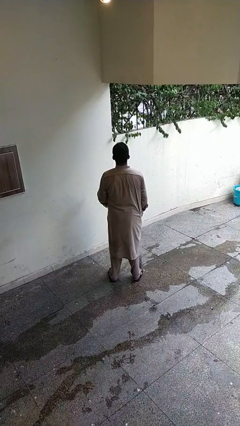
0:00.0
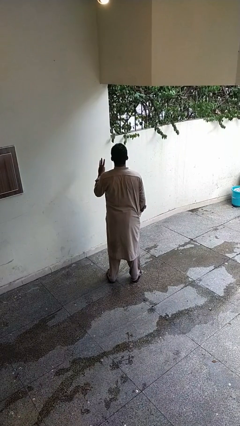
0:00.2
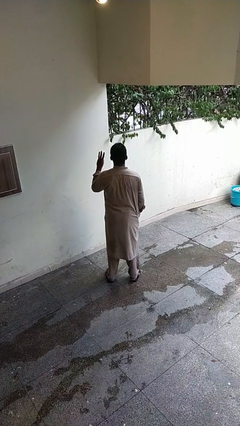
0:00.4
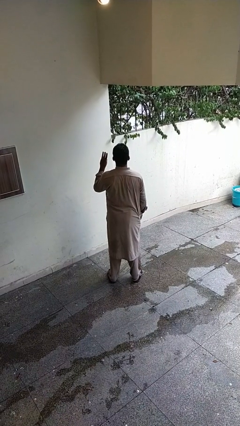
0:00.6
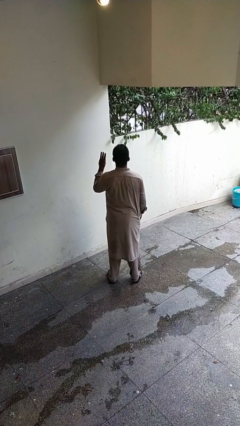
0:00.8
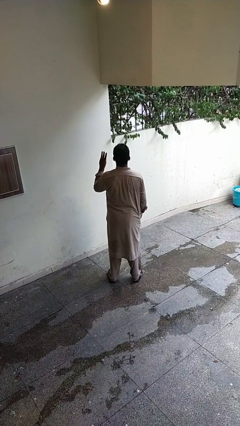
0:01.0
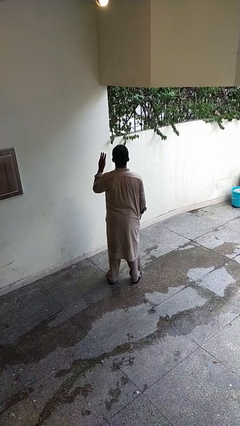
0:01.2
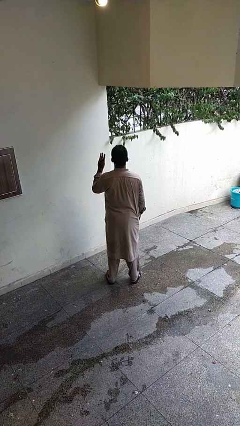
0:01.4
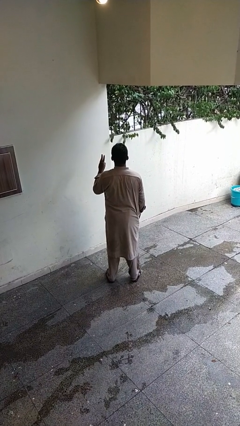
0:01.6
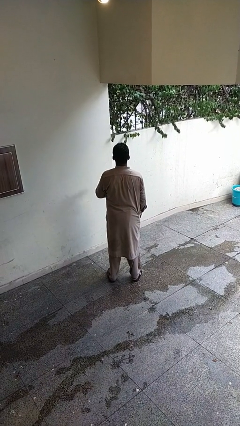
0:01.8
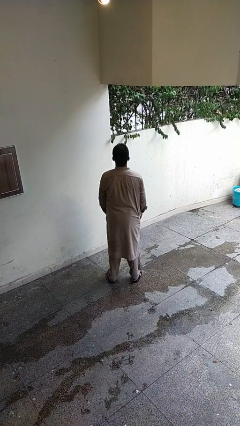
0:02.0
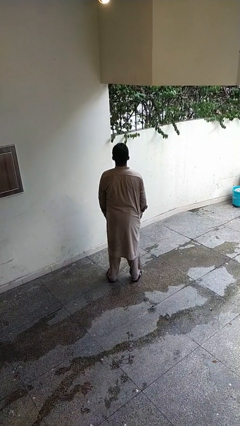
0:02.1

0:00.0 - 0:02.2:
person gestures number three

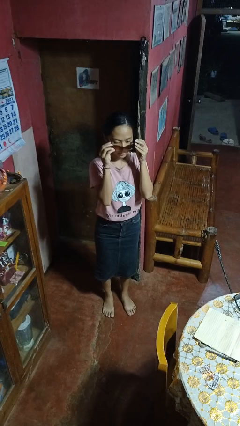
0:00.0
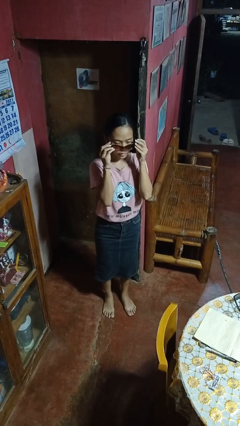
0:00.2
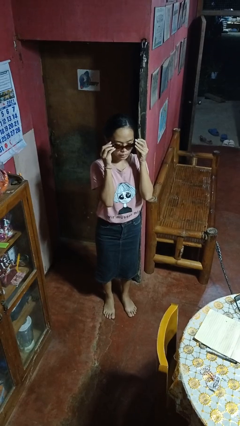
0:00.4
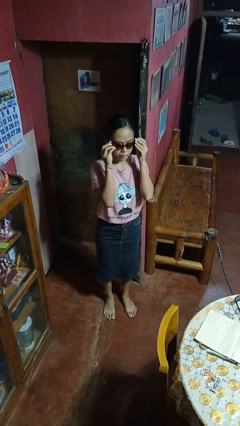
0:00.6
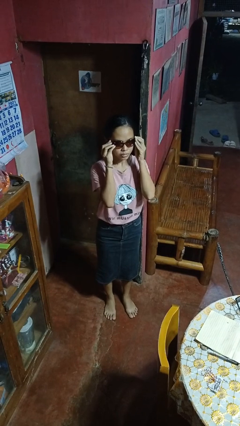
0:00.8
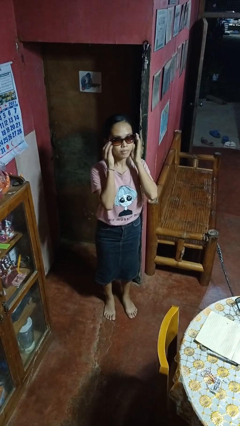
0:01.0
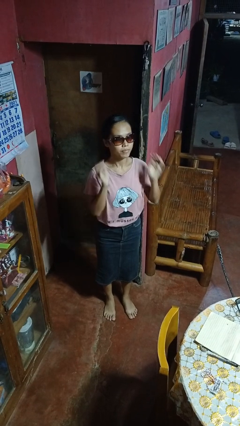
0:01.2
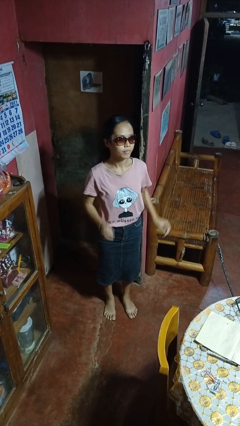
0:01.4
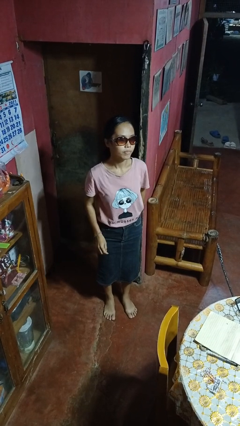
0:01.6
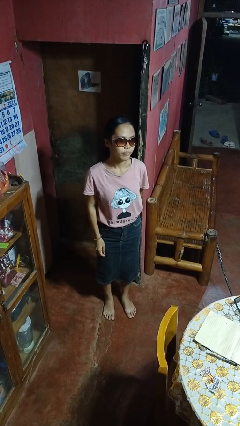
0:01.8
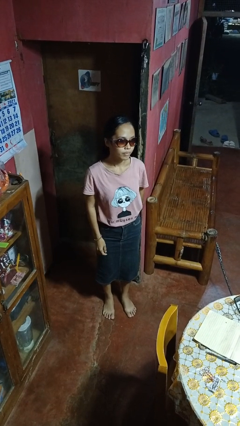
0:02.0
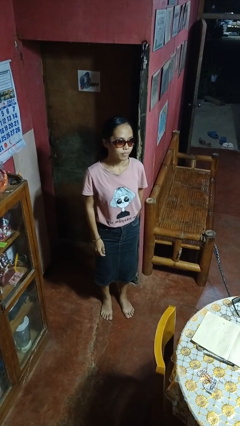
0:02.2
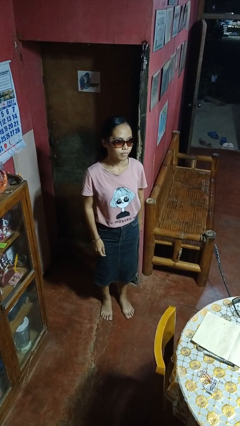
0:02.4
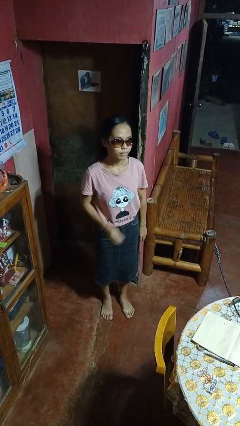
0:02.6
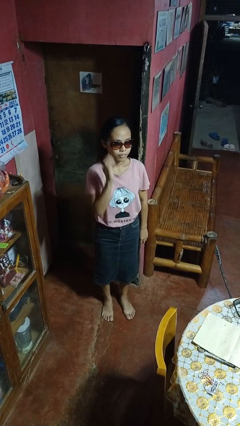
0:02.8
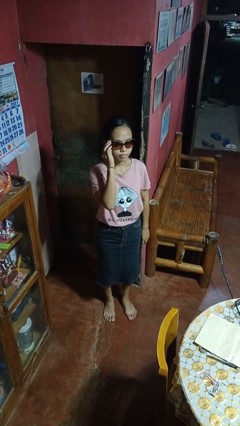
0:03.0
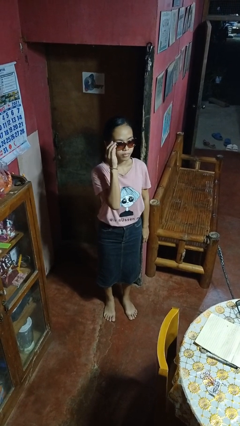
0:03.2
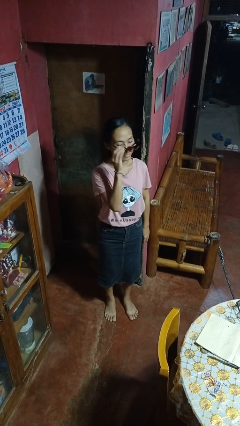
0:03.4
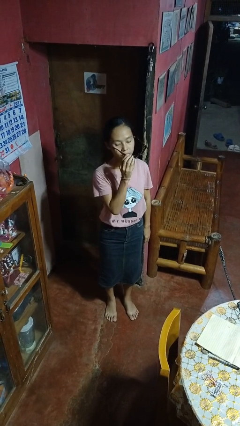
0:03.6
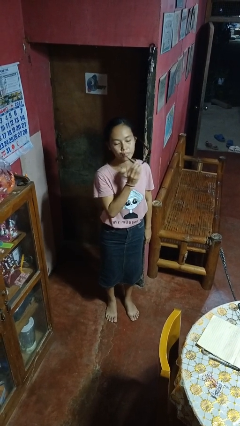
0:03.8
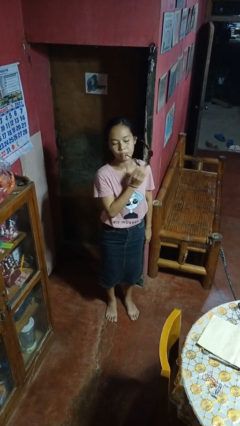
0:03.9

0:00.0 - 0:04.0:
person puts on sunglasses

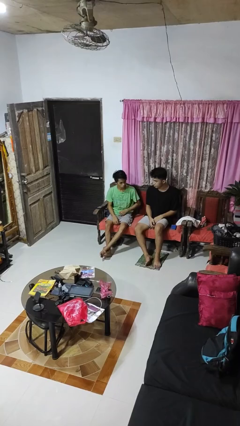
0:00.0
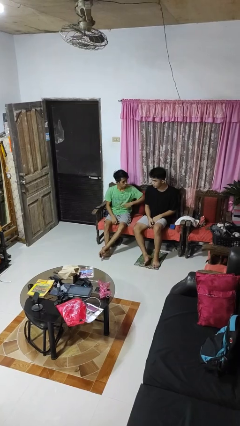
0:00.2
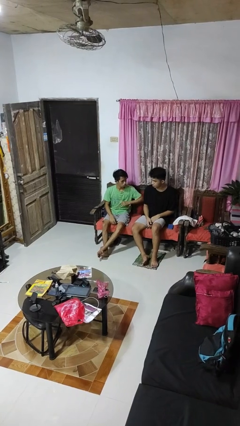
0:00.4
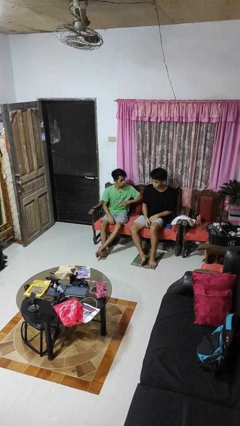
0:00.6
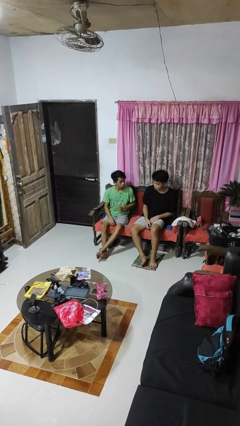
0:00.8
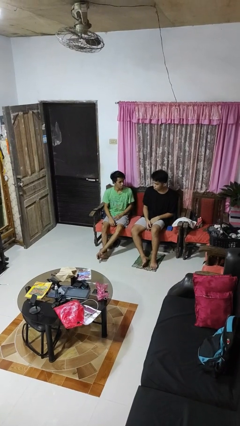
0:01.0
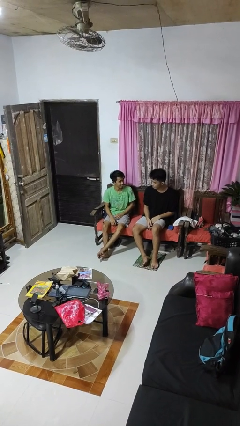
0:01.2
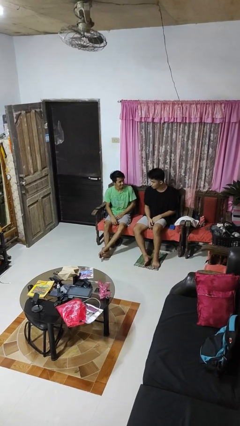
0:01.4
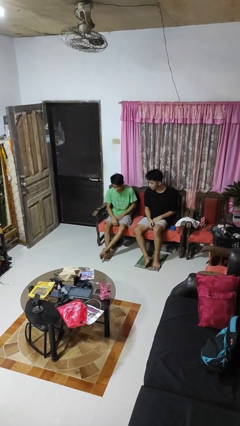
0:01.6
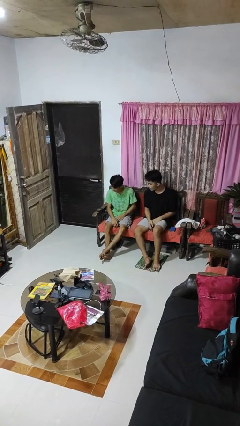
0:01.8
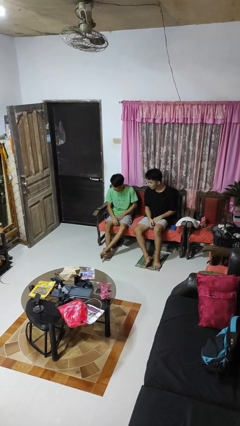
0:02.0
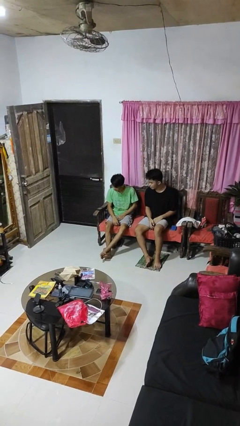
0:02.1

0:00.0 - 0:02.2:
person nudges person with elbow

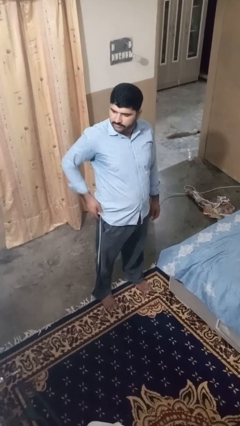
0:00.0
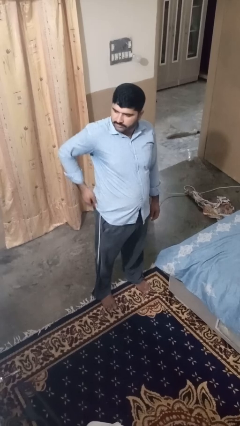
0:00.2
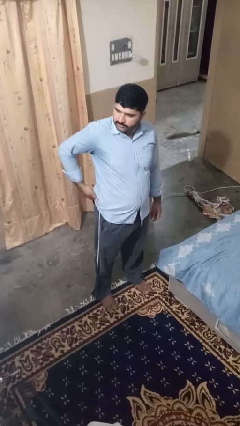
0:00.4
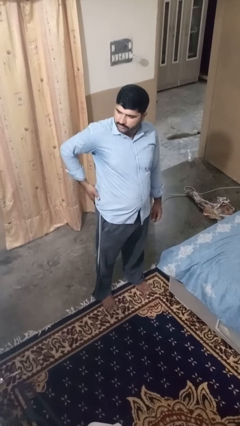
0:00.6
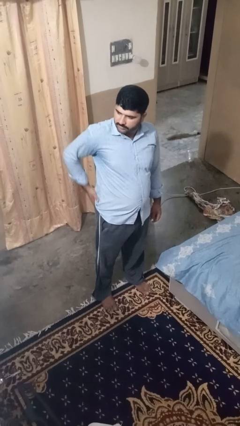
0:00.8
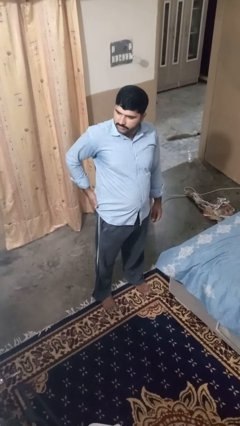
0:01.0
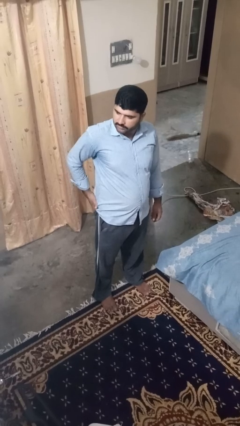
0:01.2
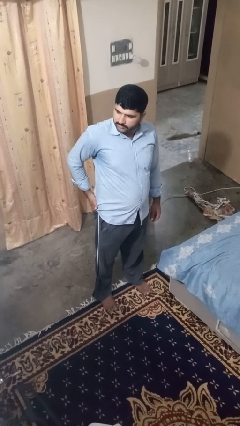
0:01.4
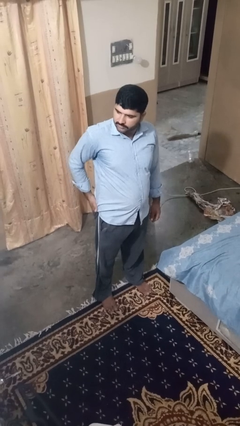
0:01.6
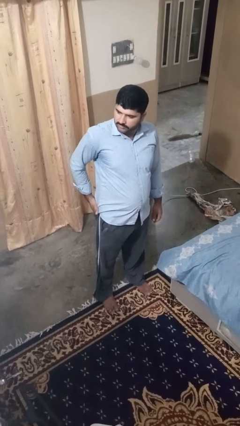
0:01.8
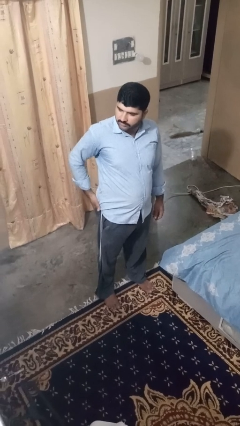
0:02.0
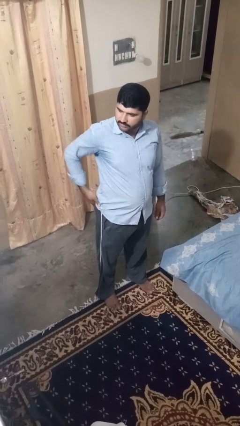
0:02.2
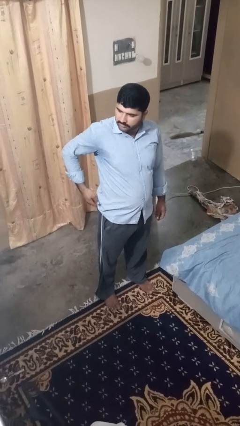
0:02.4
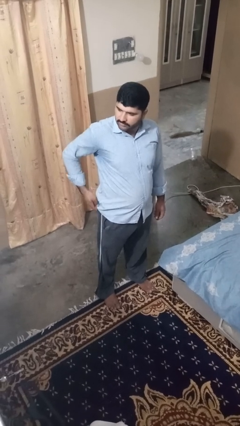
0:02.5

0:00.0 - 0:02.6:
person puts hands in back pockets

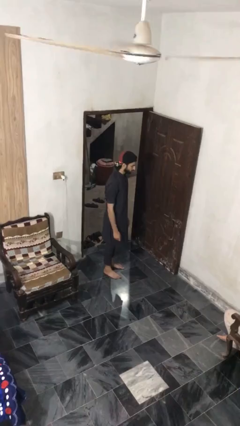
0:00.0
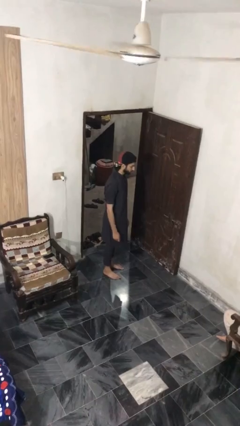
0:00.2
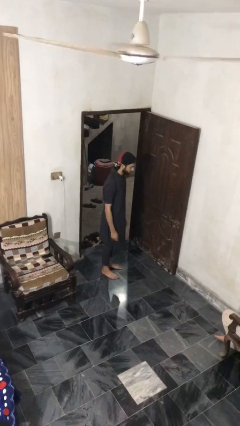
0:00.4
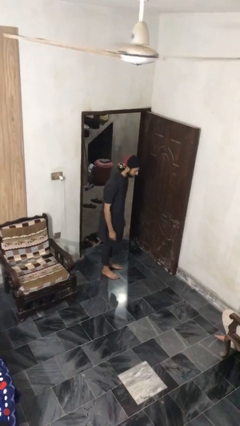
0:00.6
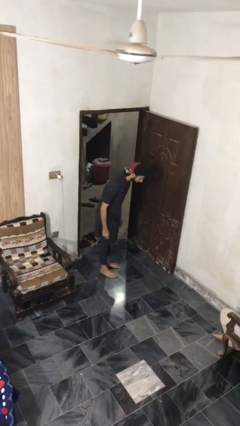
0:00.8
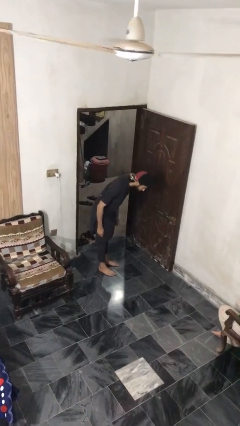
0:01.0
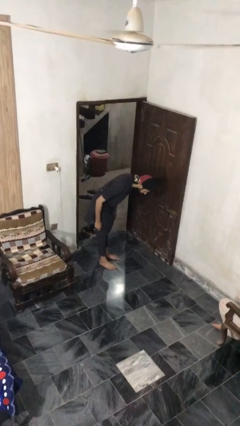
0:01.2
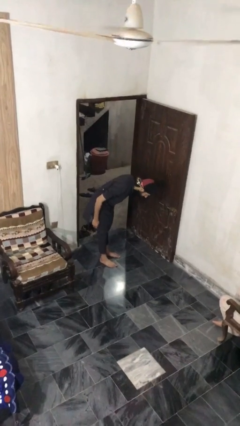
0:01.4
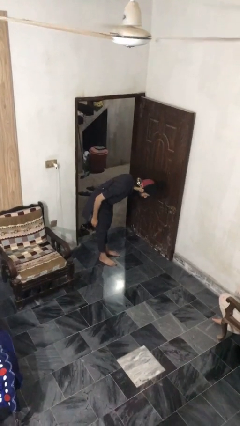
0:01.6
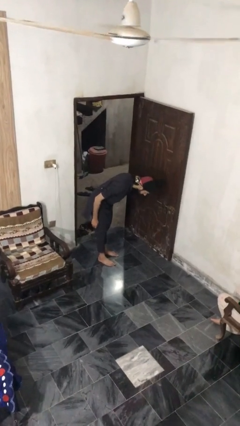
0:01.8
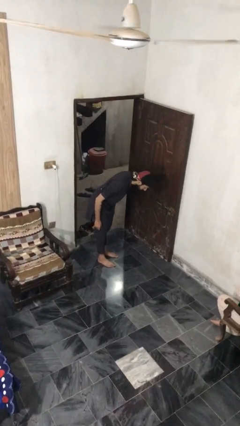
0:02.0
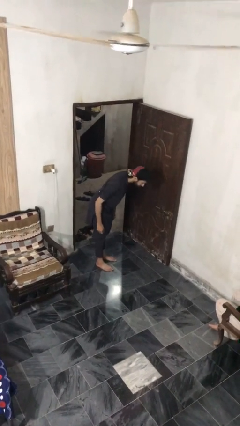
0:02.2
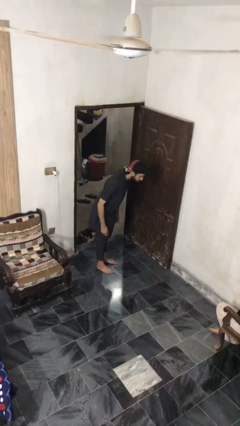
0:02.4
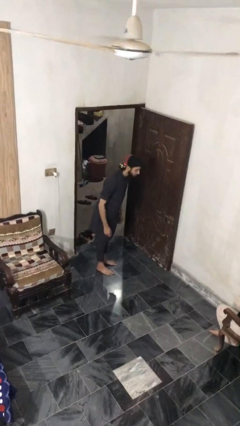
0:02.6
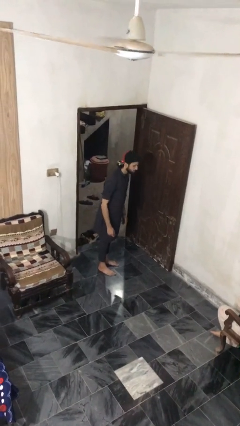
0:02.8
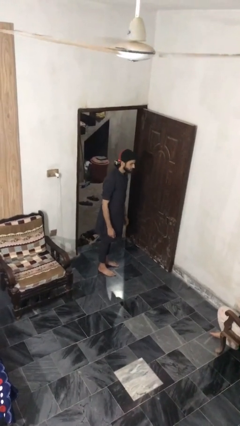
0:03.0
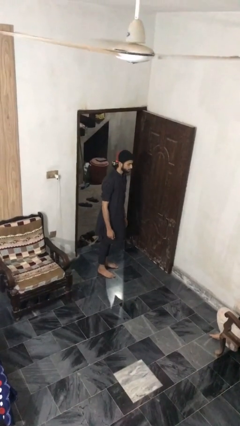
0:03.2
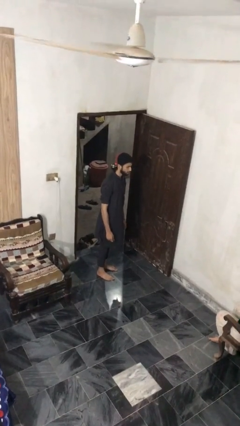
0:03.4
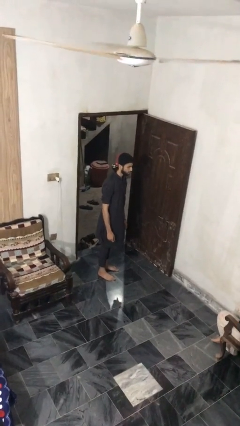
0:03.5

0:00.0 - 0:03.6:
person bows

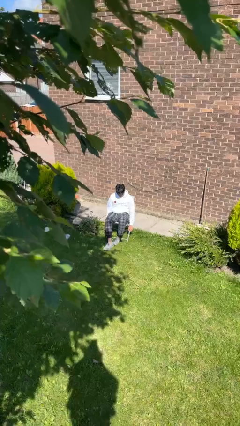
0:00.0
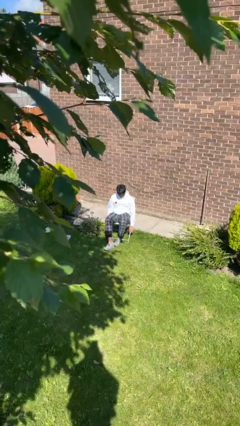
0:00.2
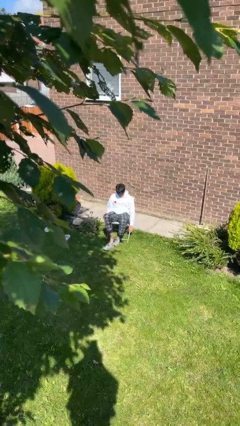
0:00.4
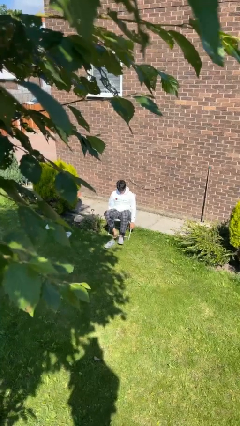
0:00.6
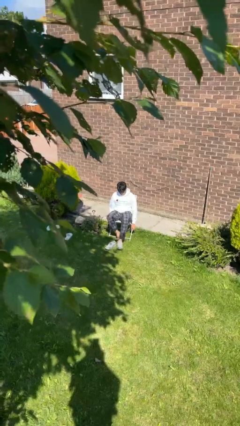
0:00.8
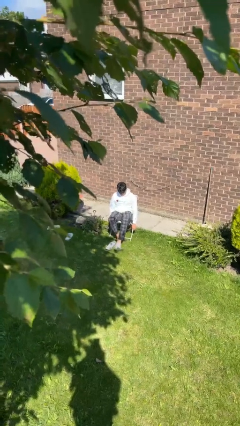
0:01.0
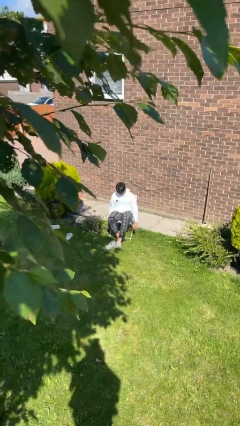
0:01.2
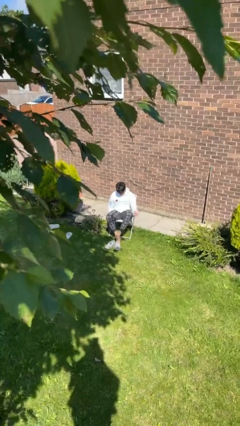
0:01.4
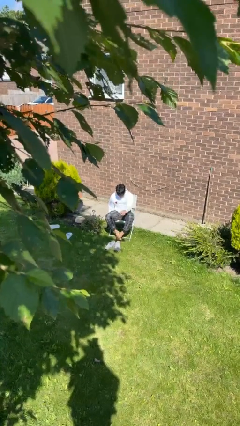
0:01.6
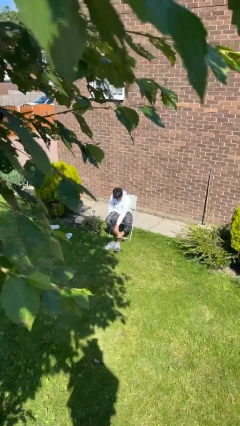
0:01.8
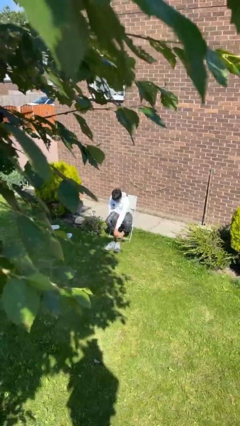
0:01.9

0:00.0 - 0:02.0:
person takes off shoes

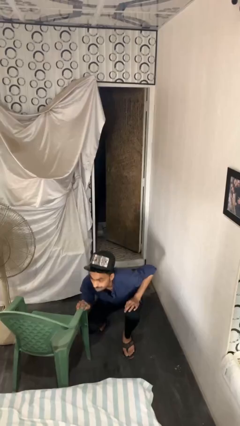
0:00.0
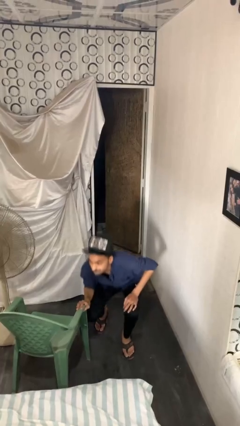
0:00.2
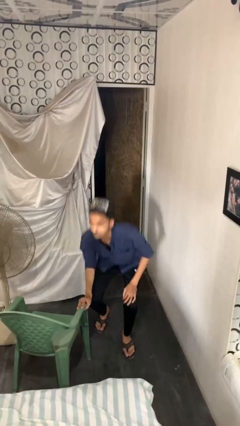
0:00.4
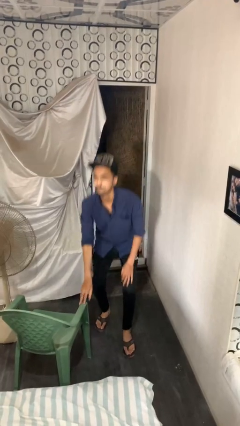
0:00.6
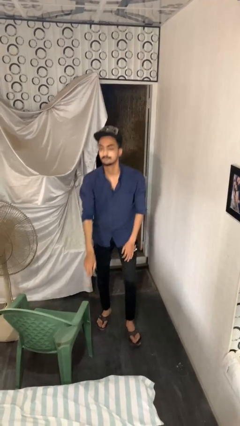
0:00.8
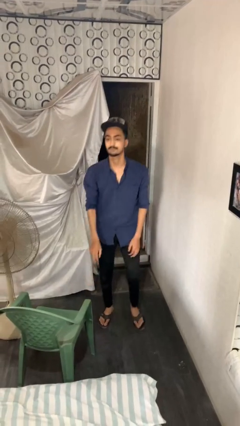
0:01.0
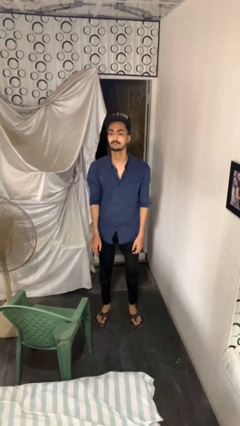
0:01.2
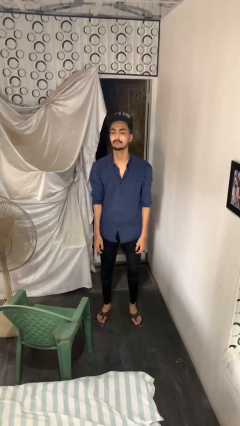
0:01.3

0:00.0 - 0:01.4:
person stands up from floor
